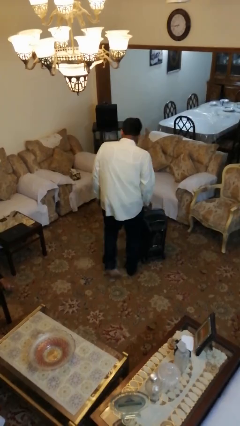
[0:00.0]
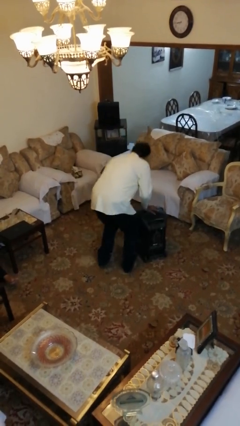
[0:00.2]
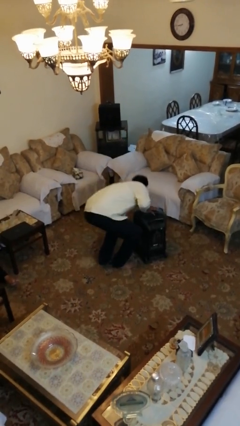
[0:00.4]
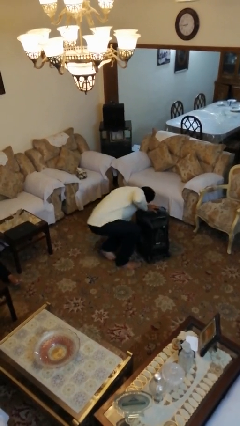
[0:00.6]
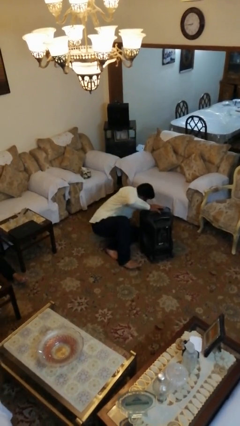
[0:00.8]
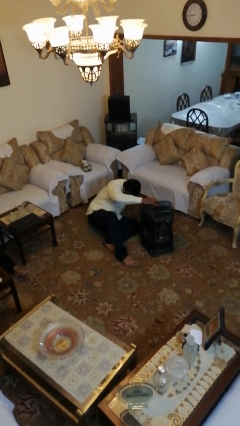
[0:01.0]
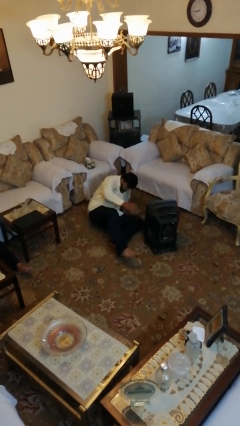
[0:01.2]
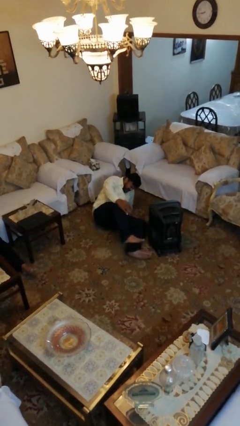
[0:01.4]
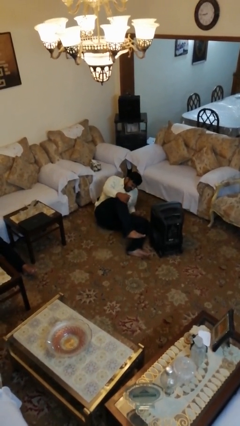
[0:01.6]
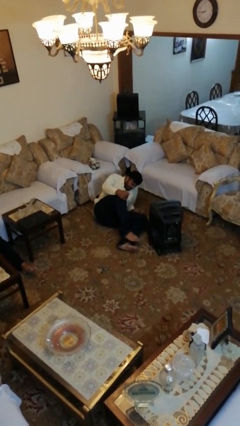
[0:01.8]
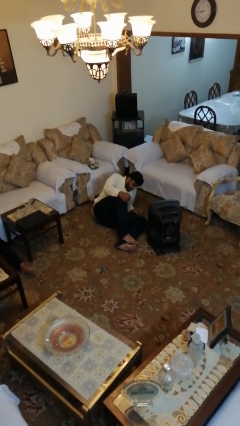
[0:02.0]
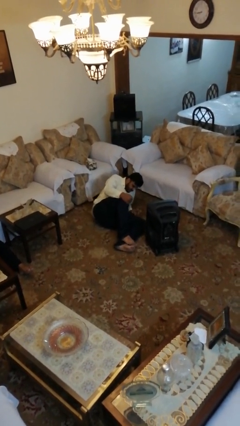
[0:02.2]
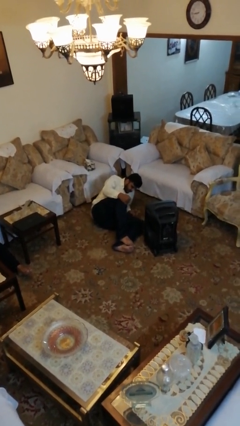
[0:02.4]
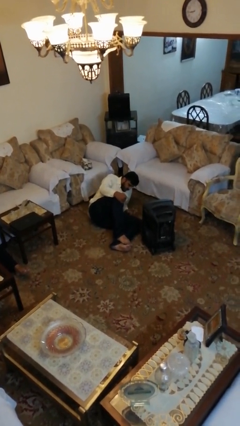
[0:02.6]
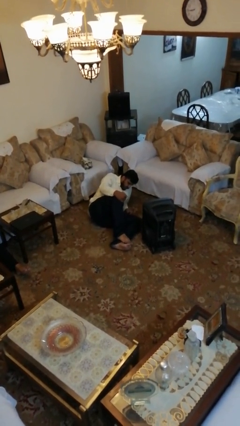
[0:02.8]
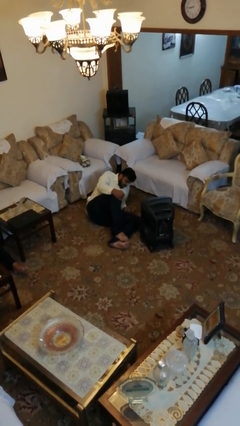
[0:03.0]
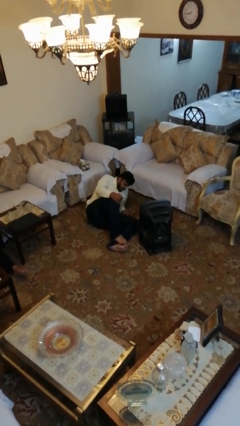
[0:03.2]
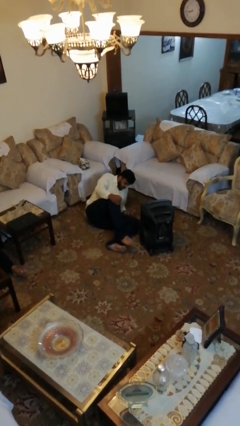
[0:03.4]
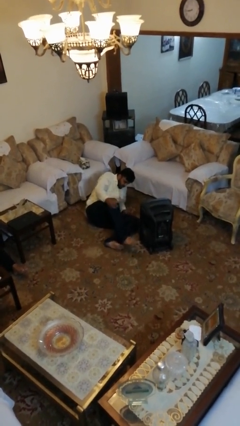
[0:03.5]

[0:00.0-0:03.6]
person trips on object on floor

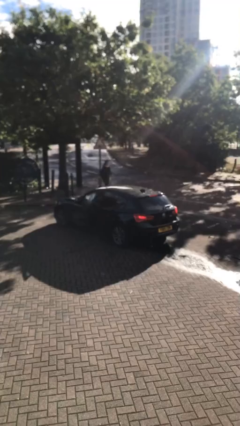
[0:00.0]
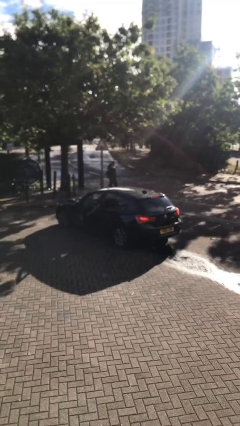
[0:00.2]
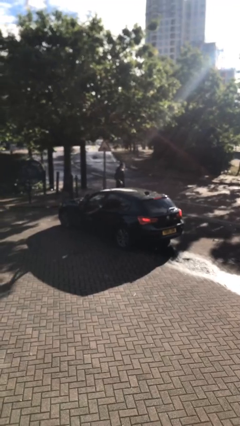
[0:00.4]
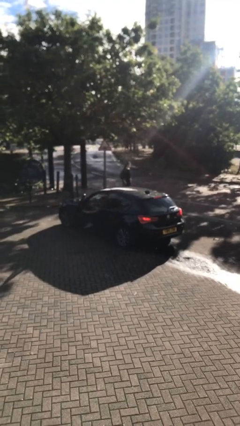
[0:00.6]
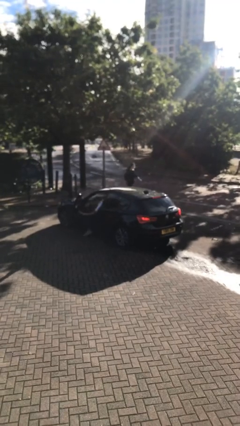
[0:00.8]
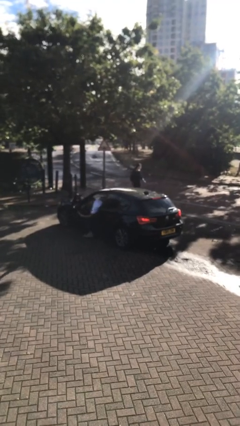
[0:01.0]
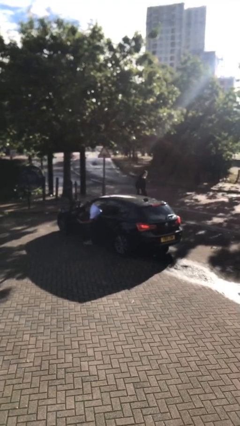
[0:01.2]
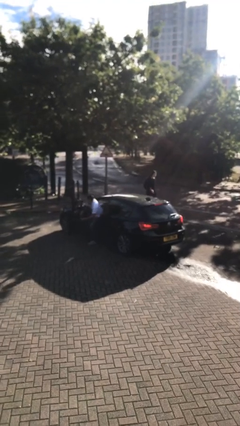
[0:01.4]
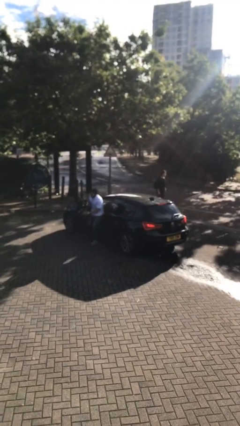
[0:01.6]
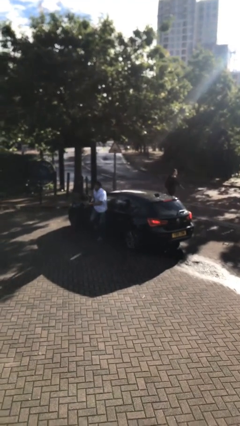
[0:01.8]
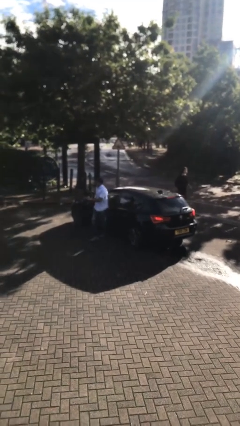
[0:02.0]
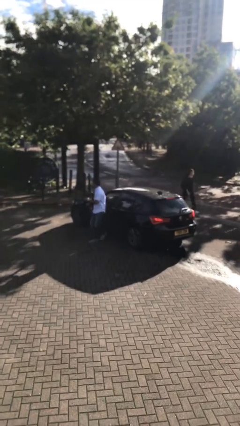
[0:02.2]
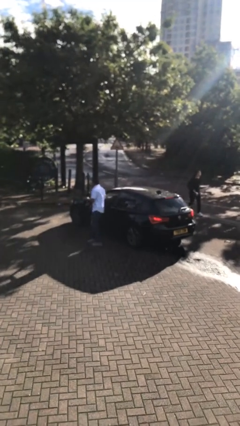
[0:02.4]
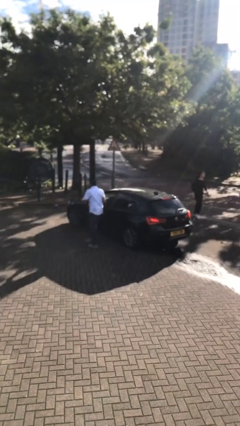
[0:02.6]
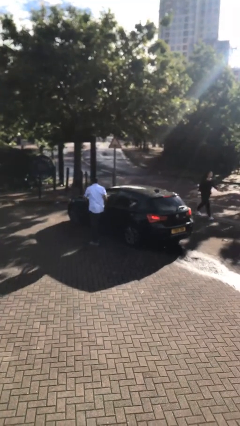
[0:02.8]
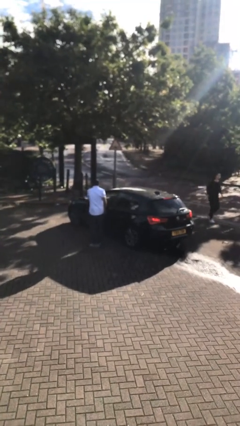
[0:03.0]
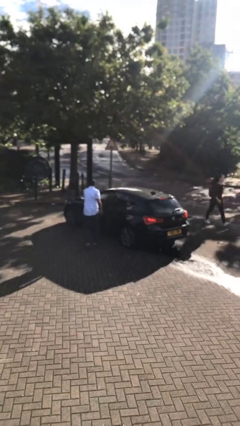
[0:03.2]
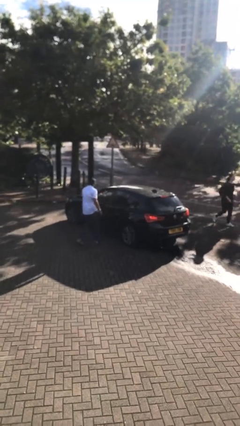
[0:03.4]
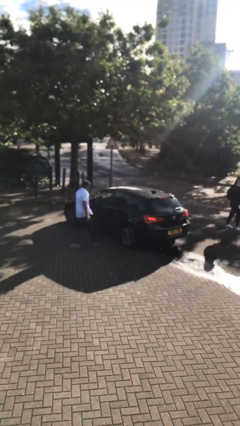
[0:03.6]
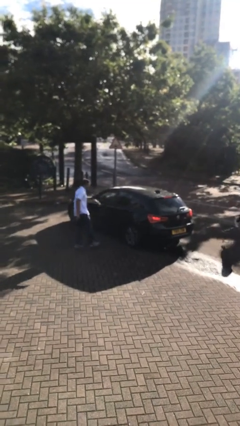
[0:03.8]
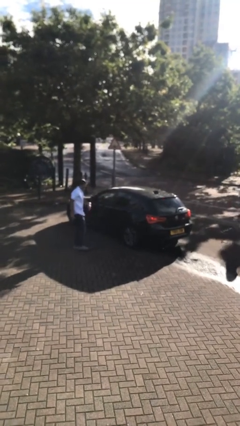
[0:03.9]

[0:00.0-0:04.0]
car drops off person

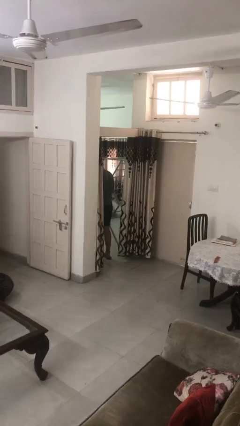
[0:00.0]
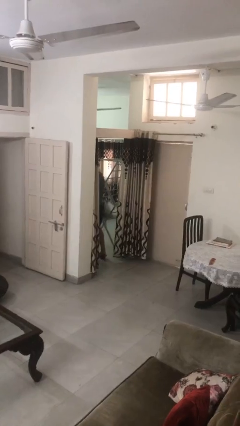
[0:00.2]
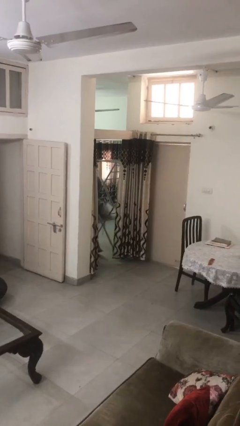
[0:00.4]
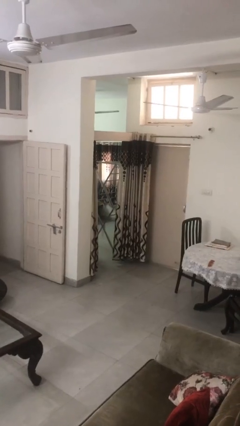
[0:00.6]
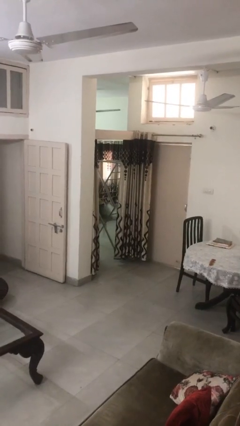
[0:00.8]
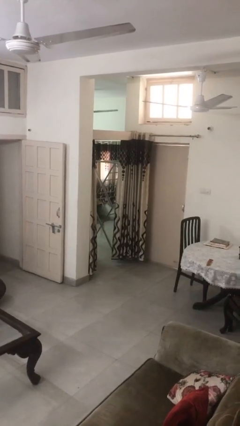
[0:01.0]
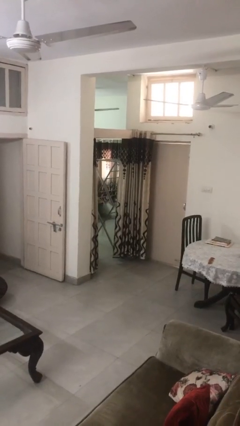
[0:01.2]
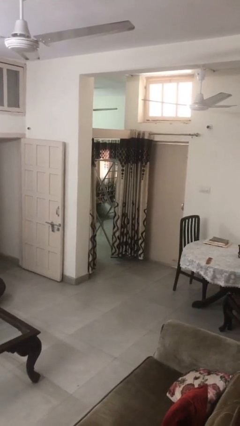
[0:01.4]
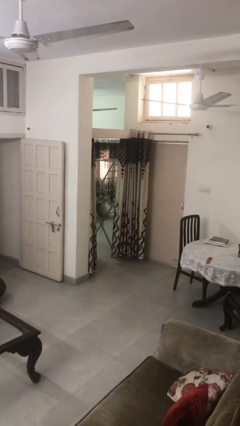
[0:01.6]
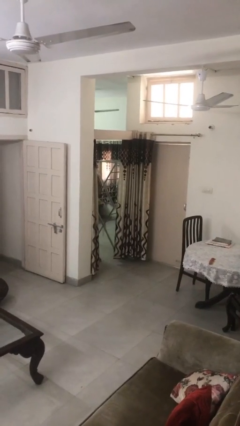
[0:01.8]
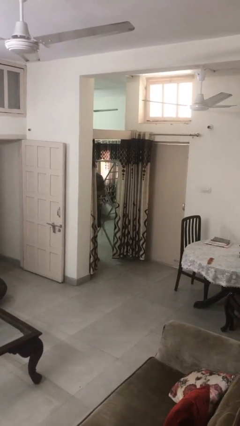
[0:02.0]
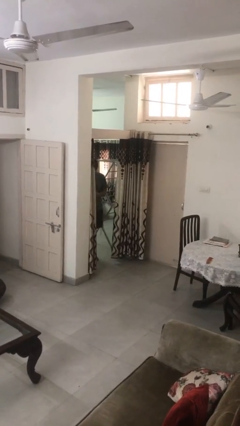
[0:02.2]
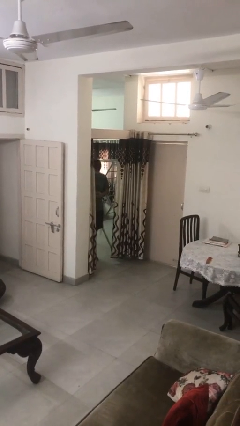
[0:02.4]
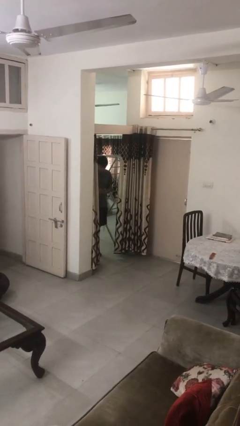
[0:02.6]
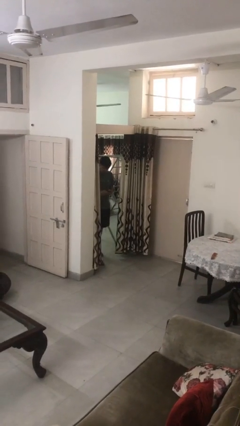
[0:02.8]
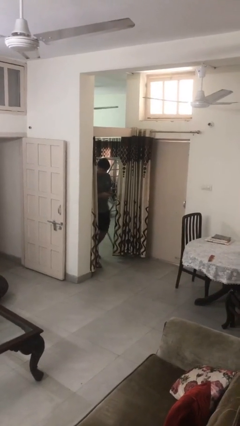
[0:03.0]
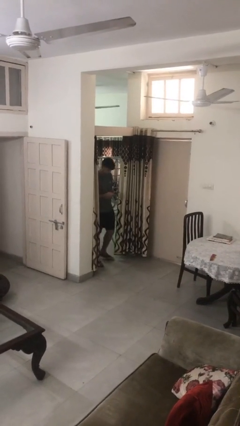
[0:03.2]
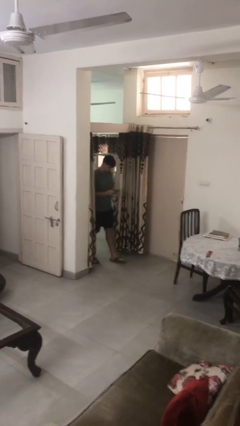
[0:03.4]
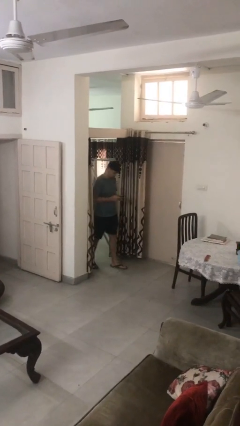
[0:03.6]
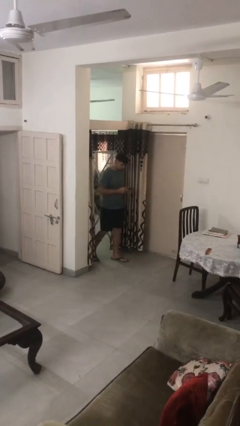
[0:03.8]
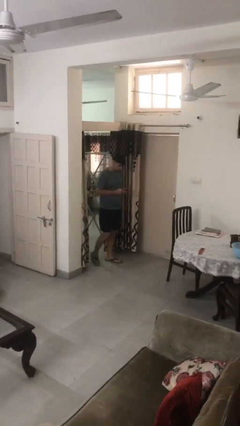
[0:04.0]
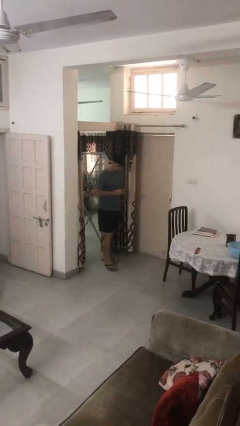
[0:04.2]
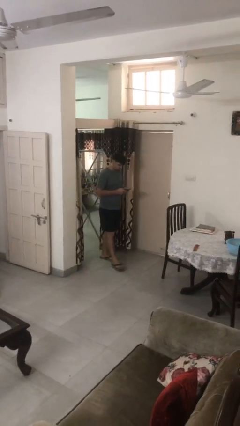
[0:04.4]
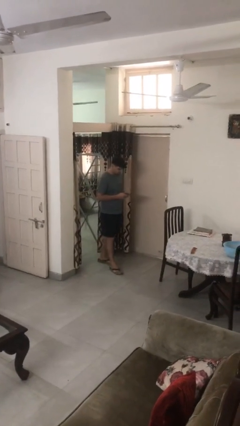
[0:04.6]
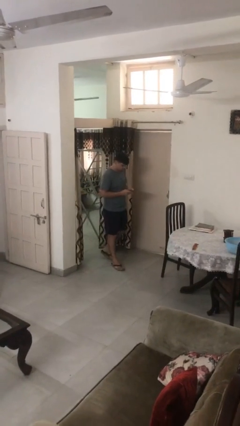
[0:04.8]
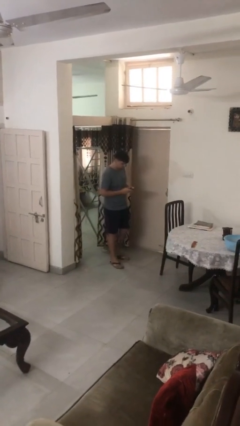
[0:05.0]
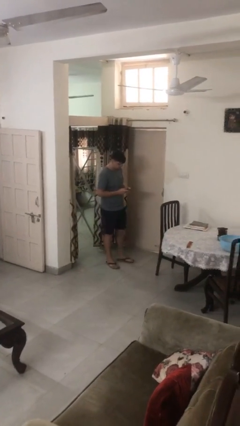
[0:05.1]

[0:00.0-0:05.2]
person enters scene through structure

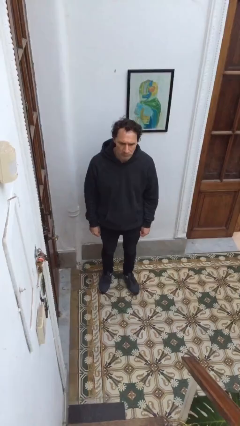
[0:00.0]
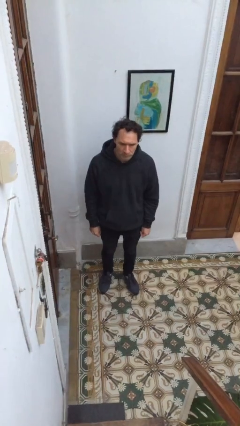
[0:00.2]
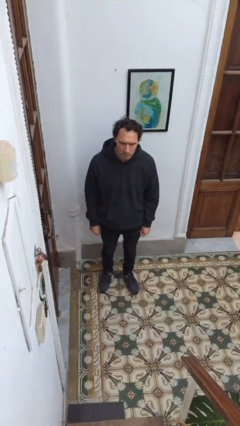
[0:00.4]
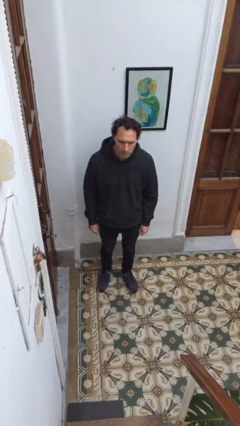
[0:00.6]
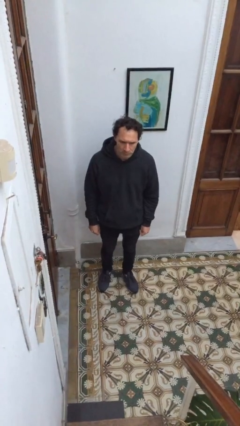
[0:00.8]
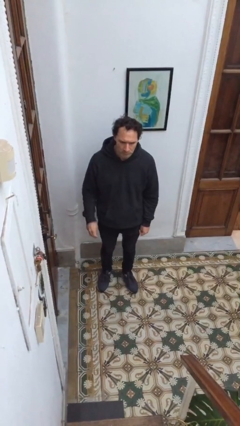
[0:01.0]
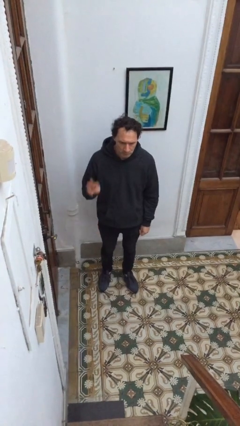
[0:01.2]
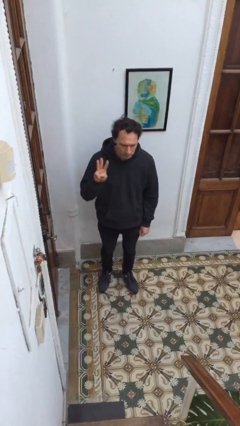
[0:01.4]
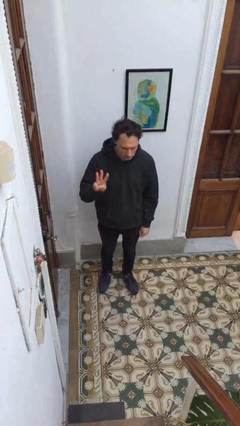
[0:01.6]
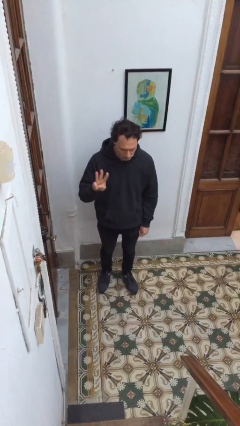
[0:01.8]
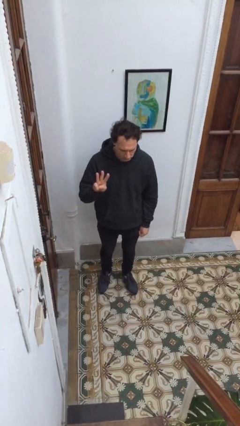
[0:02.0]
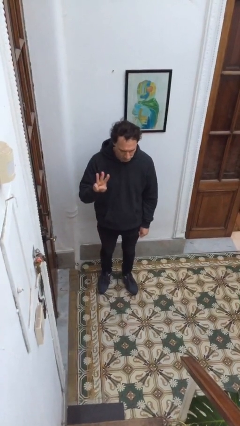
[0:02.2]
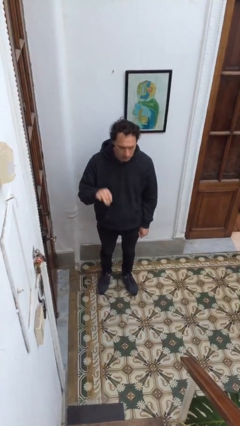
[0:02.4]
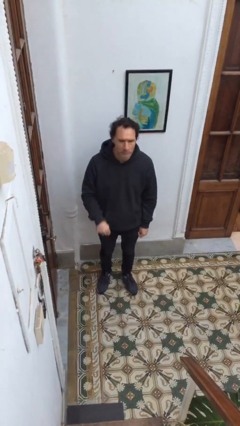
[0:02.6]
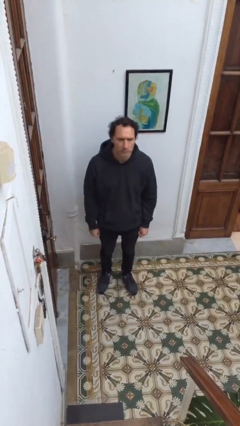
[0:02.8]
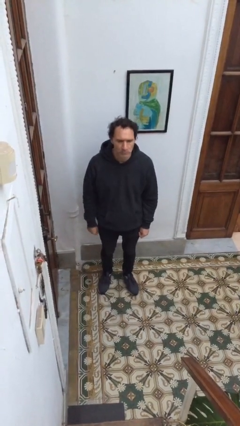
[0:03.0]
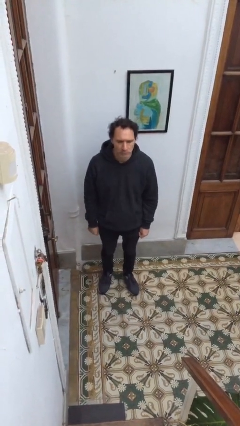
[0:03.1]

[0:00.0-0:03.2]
person gestures number three

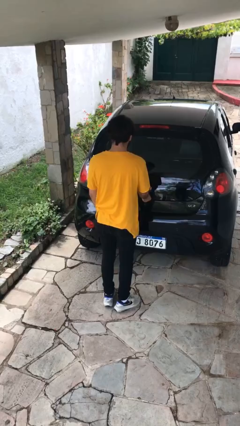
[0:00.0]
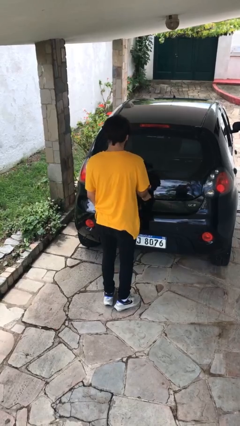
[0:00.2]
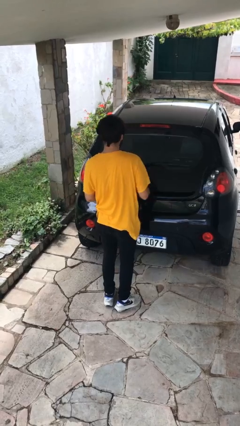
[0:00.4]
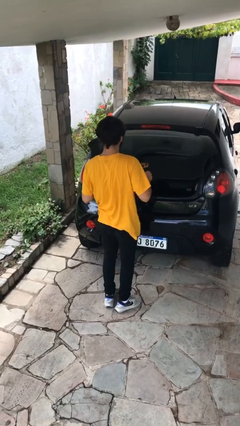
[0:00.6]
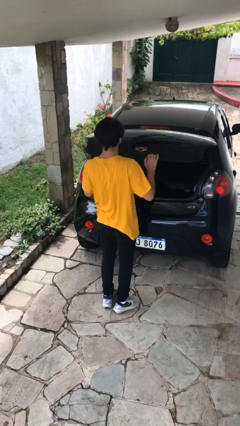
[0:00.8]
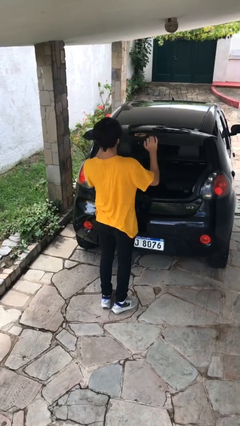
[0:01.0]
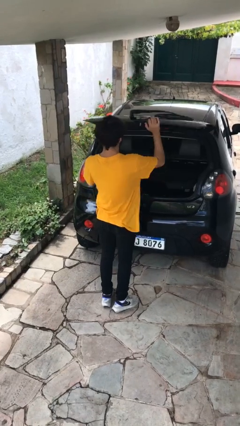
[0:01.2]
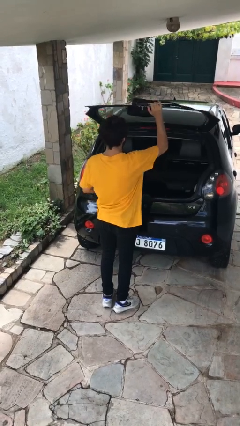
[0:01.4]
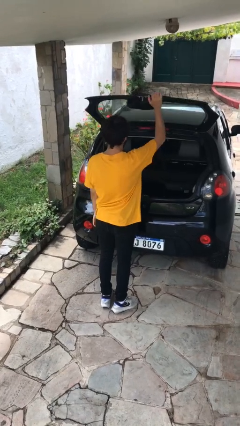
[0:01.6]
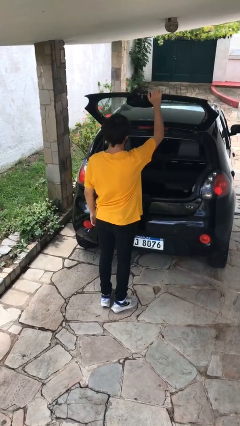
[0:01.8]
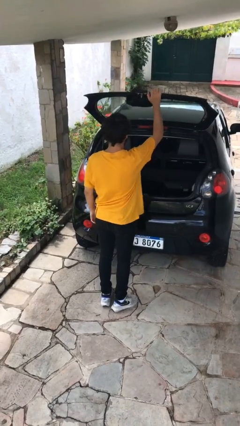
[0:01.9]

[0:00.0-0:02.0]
person opens car trunk
